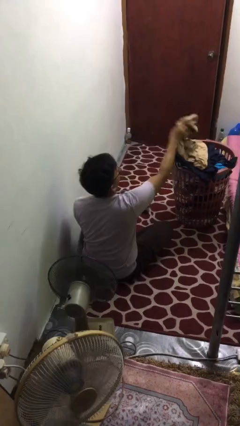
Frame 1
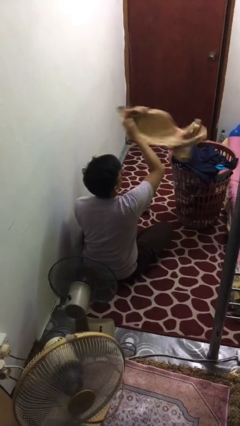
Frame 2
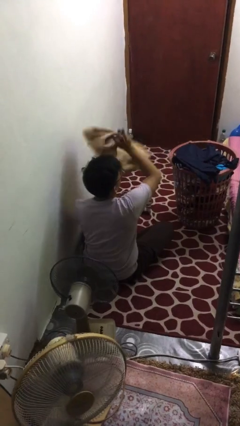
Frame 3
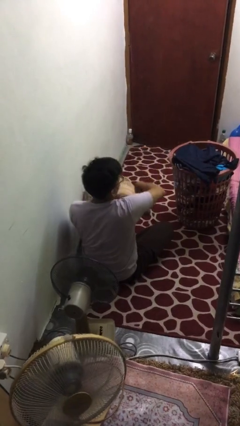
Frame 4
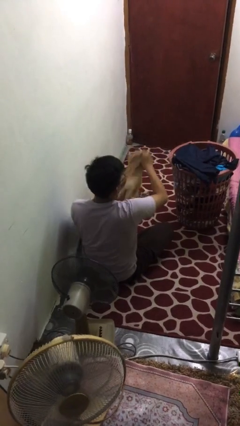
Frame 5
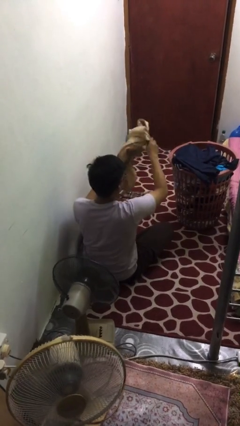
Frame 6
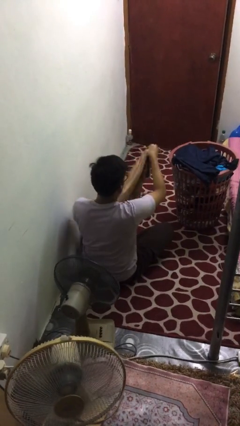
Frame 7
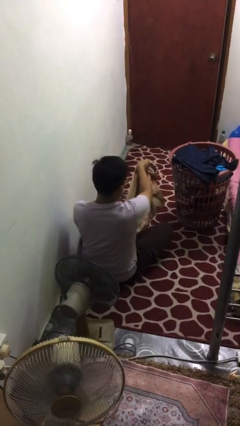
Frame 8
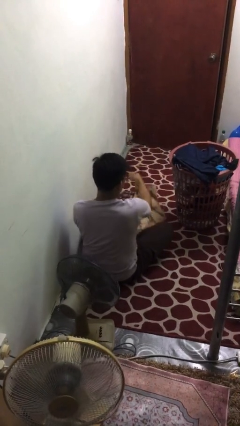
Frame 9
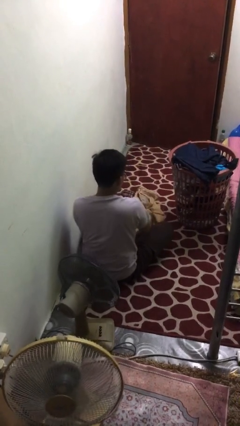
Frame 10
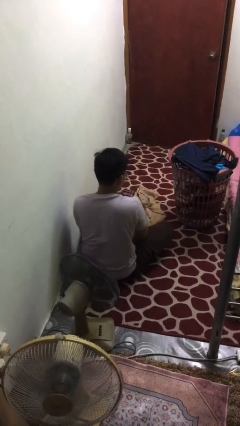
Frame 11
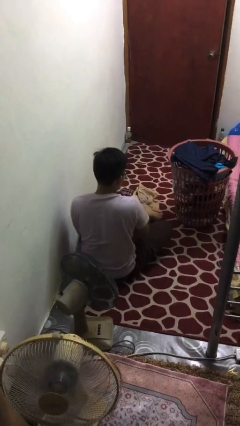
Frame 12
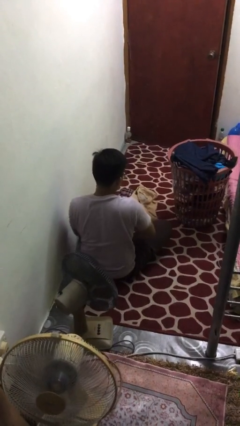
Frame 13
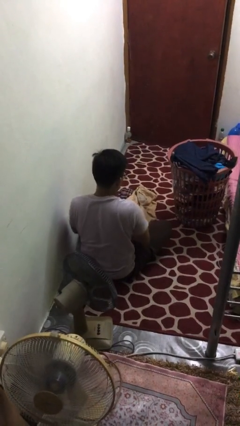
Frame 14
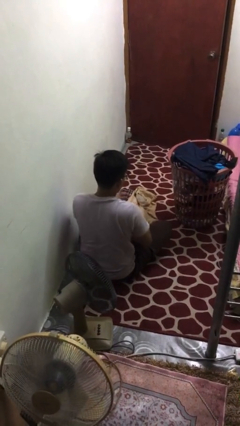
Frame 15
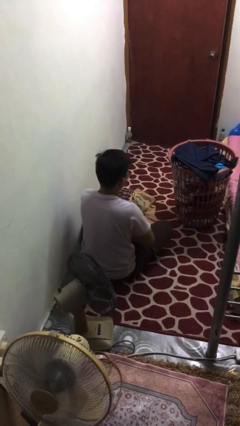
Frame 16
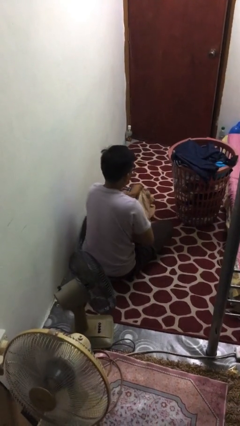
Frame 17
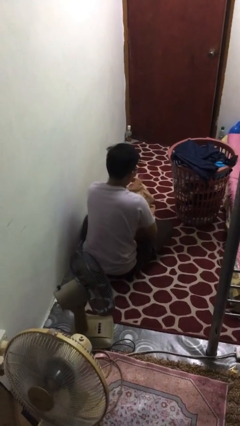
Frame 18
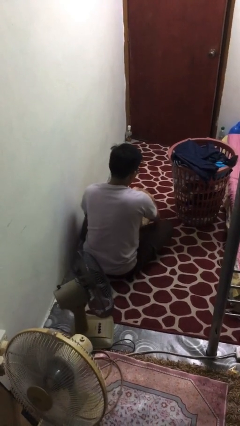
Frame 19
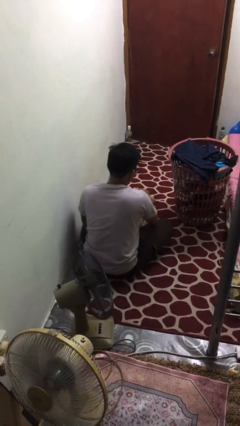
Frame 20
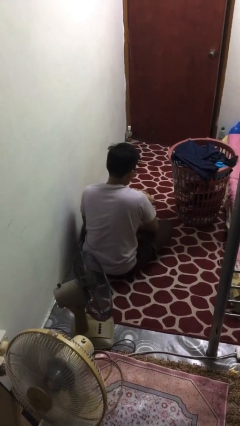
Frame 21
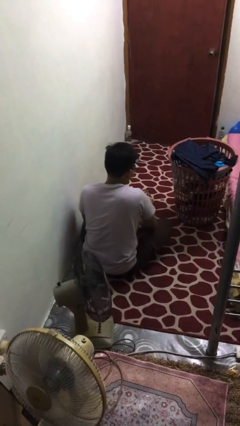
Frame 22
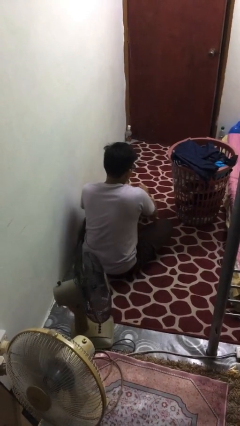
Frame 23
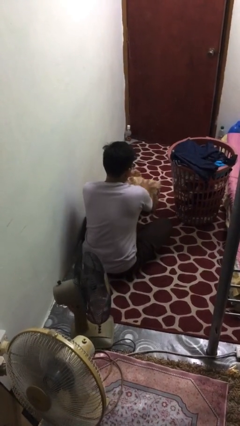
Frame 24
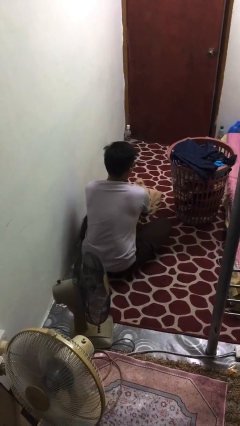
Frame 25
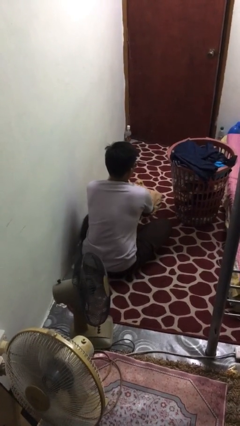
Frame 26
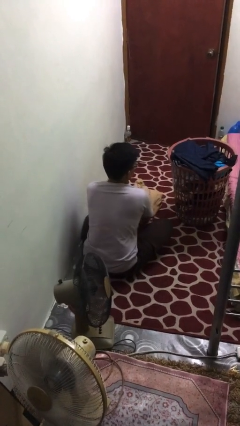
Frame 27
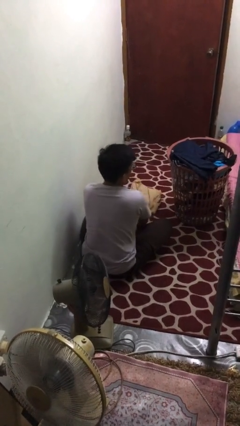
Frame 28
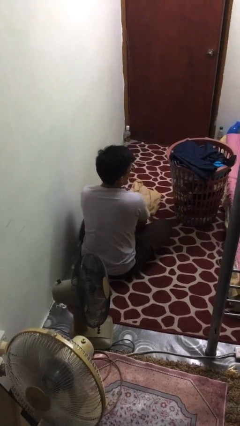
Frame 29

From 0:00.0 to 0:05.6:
person folds pants

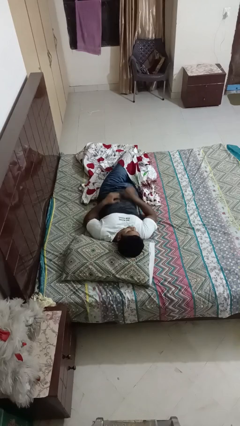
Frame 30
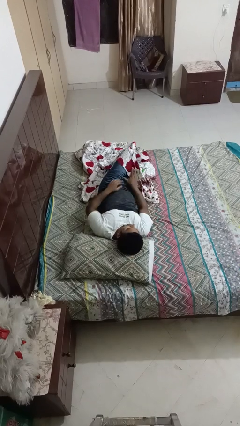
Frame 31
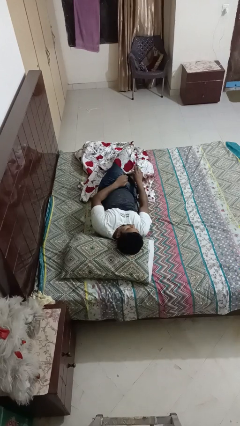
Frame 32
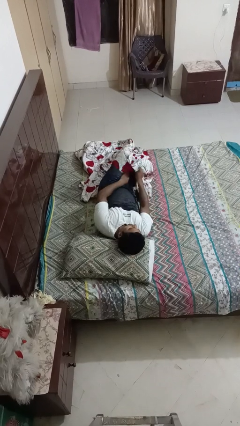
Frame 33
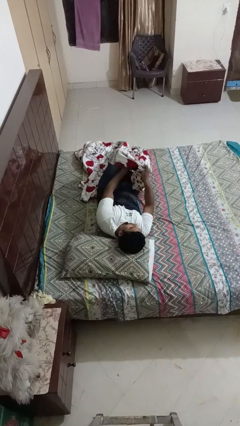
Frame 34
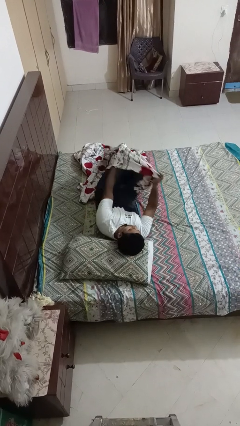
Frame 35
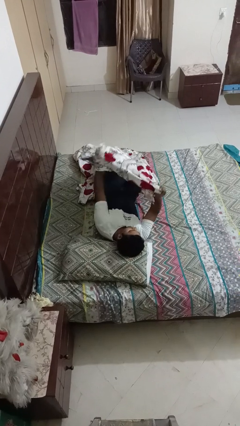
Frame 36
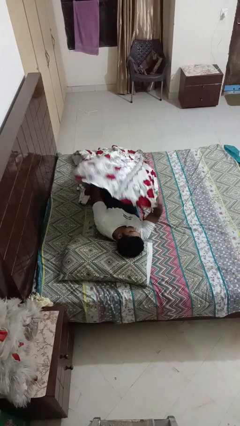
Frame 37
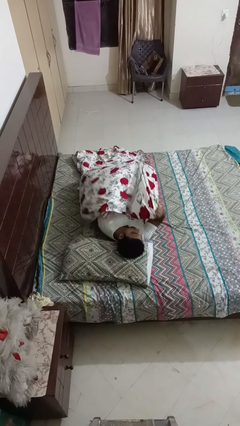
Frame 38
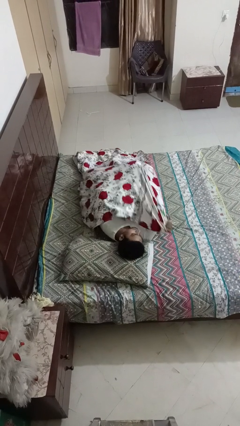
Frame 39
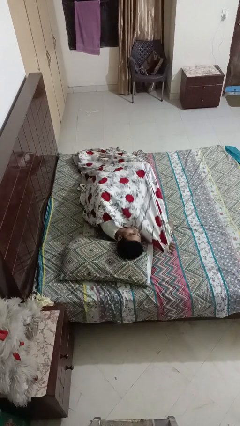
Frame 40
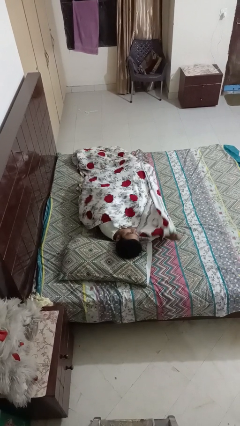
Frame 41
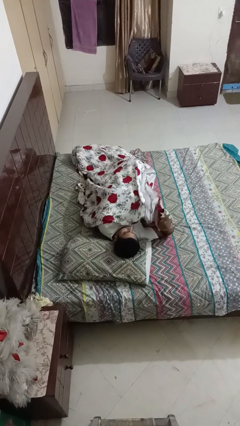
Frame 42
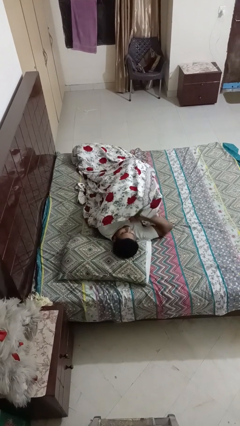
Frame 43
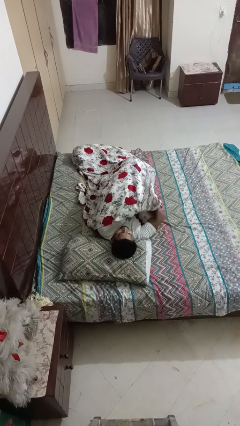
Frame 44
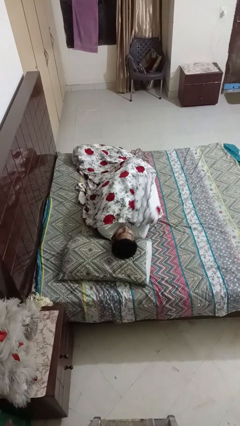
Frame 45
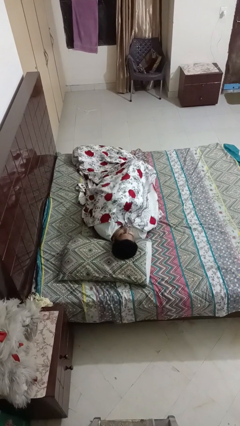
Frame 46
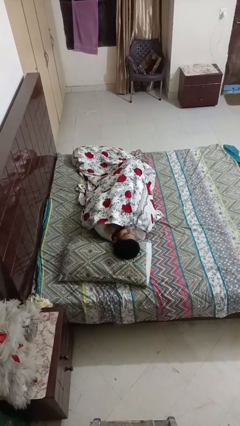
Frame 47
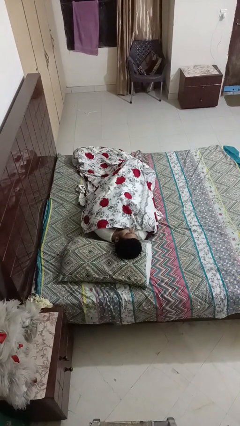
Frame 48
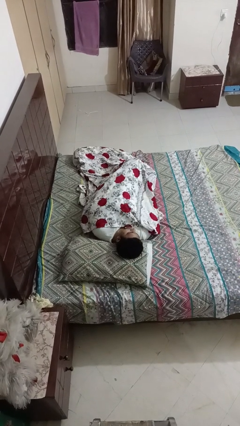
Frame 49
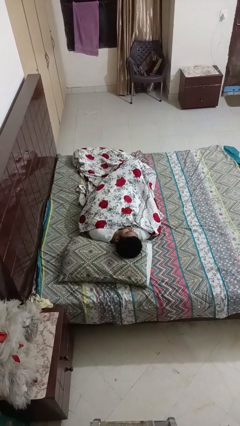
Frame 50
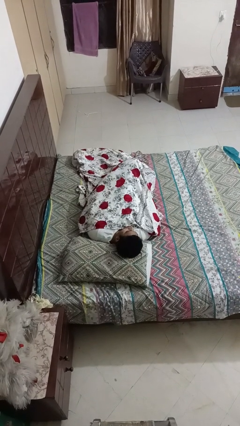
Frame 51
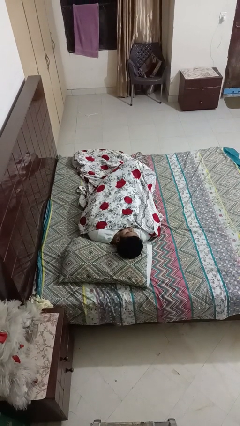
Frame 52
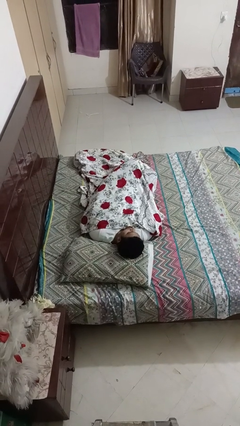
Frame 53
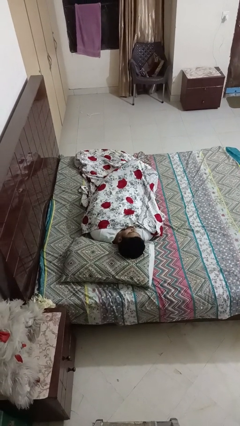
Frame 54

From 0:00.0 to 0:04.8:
person covers with bedsheets

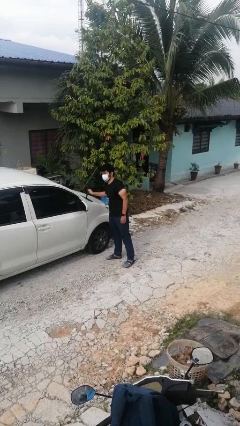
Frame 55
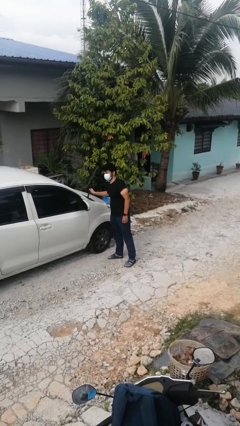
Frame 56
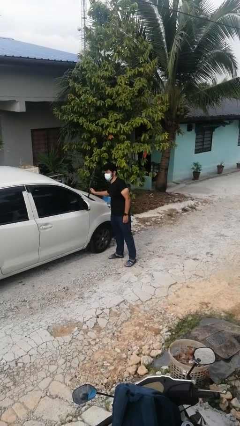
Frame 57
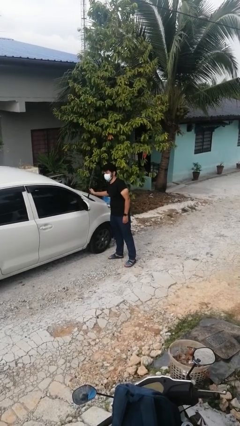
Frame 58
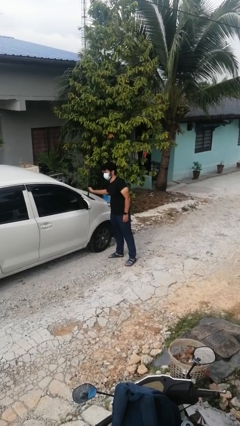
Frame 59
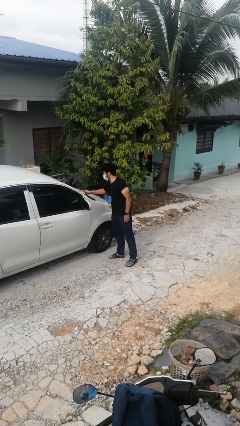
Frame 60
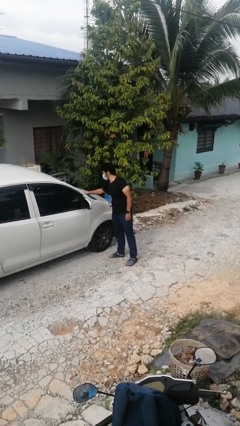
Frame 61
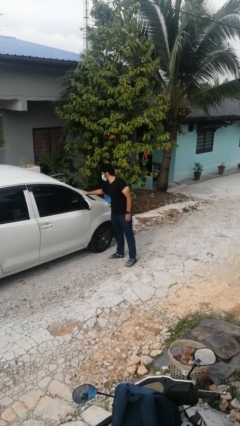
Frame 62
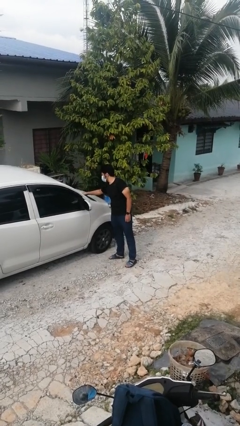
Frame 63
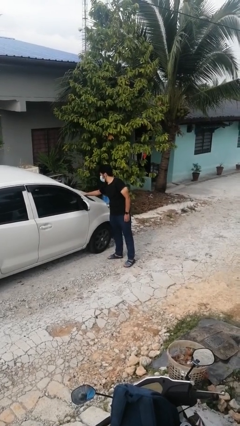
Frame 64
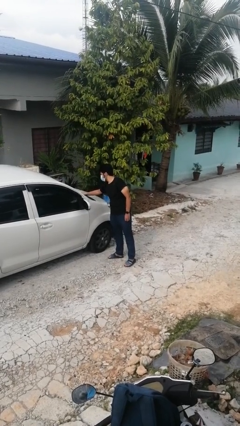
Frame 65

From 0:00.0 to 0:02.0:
person flips down car wipers

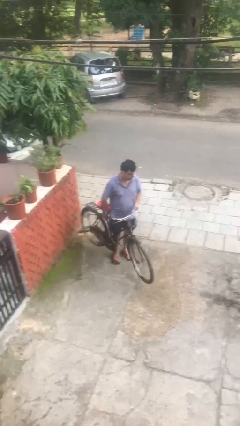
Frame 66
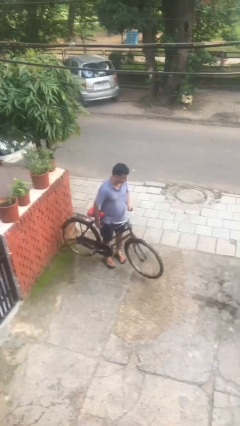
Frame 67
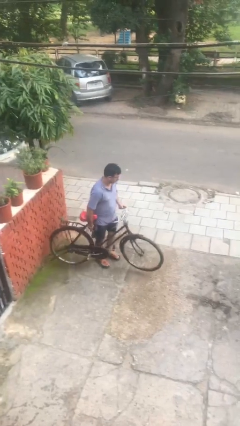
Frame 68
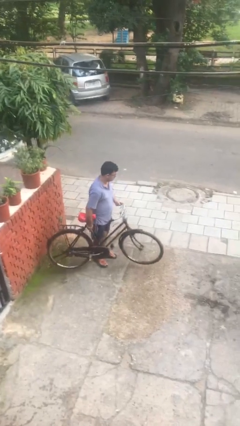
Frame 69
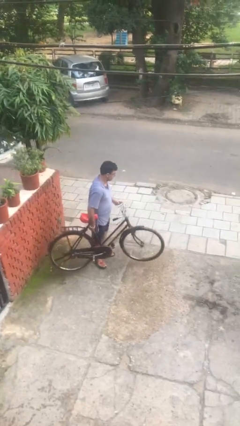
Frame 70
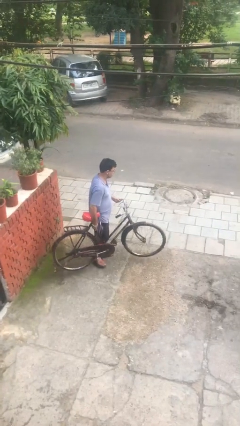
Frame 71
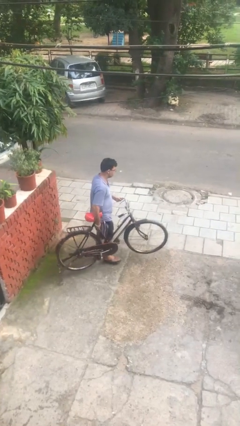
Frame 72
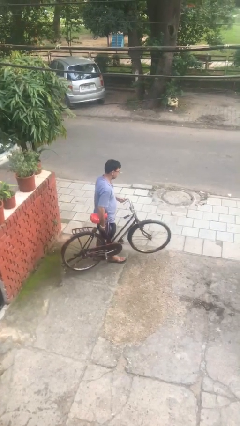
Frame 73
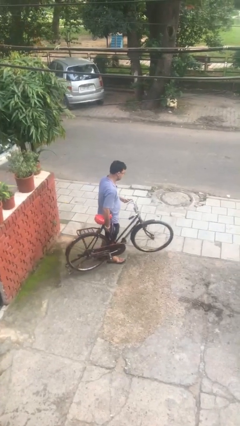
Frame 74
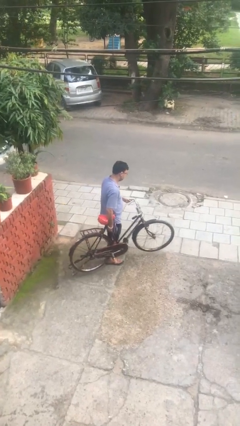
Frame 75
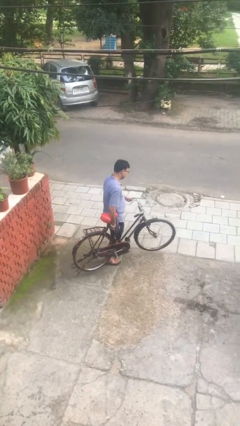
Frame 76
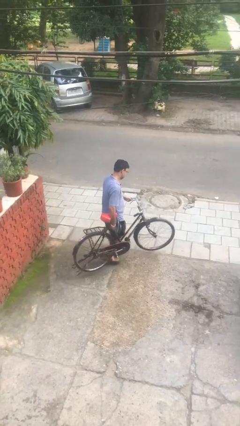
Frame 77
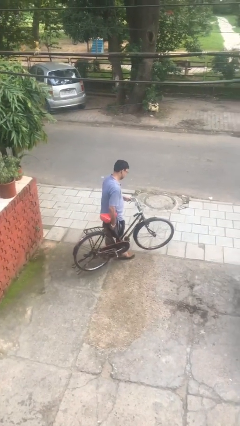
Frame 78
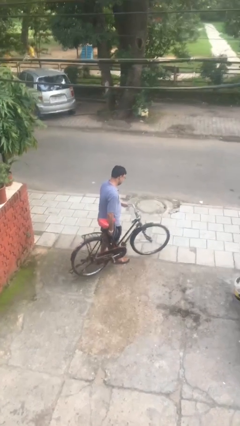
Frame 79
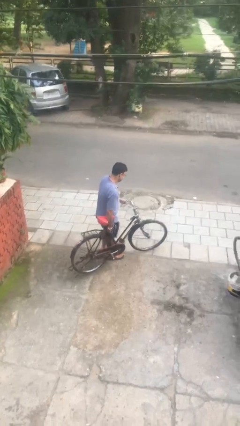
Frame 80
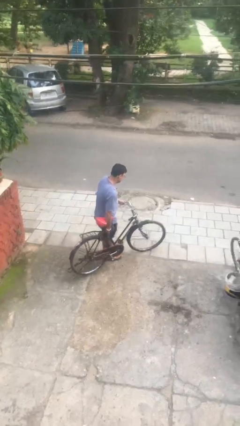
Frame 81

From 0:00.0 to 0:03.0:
person carries bicycle

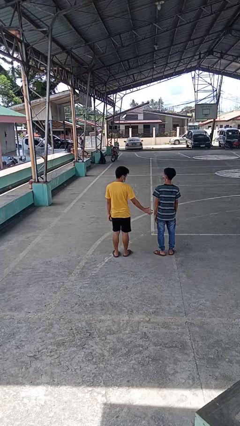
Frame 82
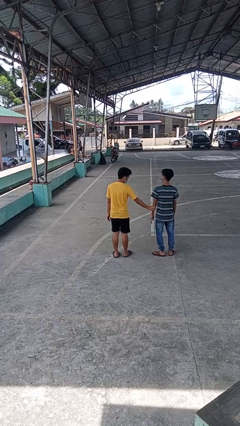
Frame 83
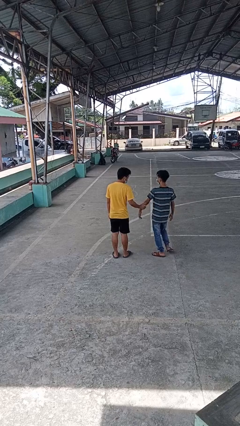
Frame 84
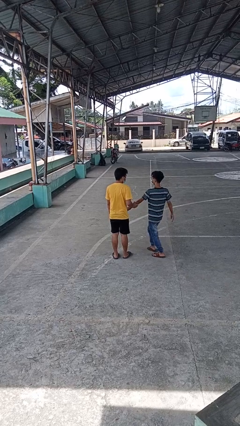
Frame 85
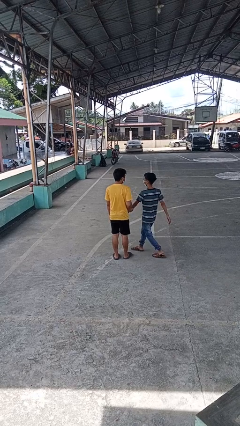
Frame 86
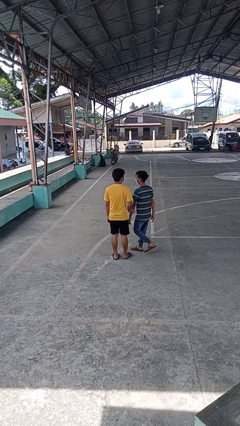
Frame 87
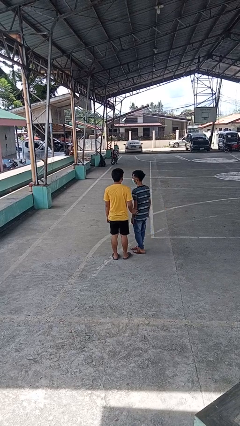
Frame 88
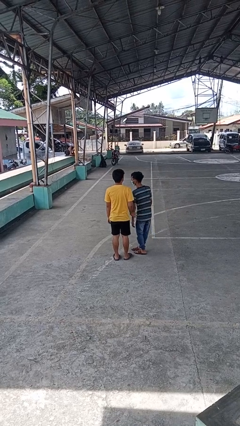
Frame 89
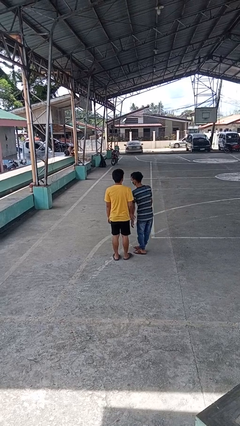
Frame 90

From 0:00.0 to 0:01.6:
person grabs person by forearm

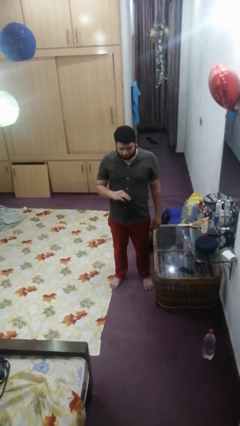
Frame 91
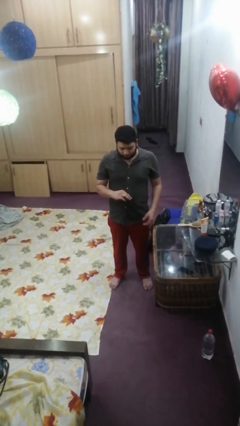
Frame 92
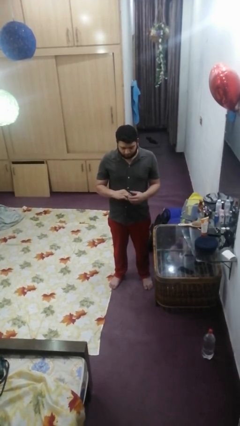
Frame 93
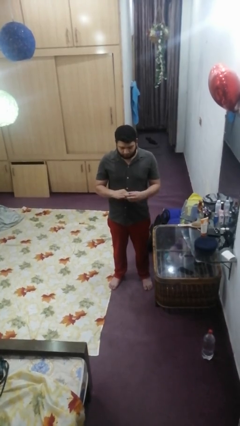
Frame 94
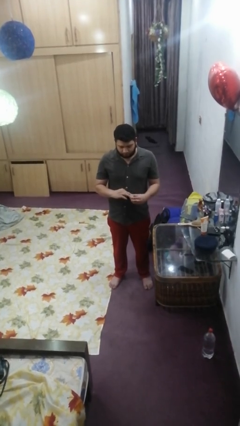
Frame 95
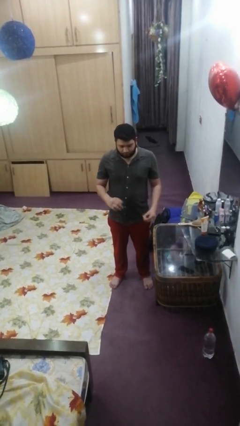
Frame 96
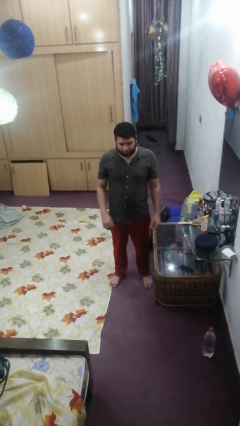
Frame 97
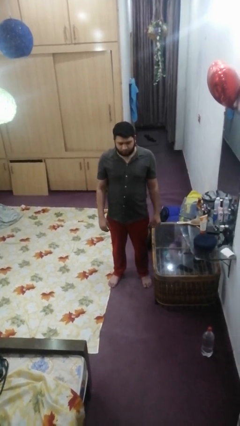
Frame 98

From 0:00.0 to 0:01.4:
person takes off ring
